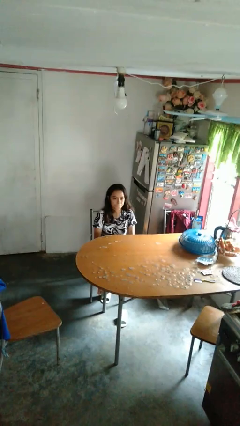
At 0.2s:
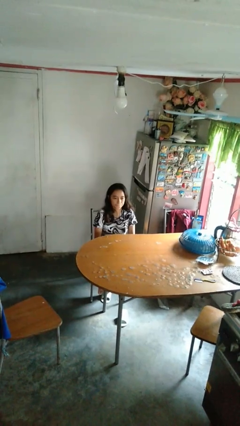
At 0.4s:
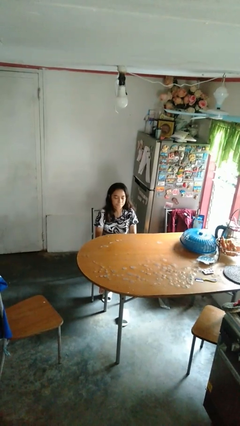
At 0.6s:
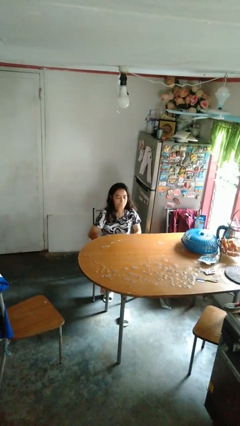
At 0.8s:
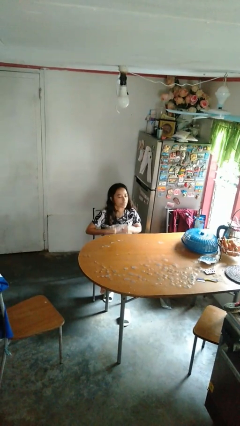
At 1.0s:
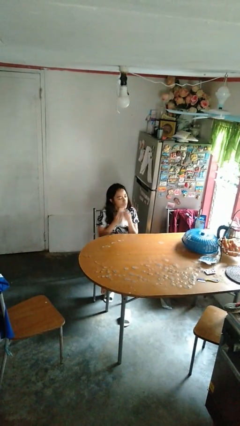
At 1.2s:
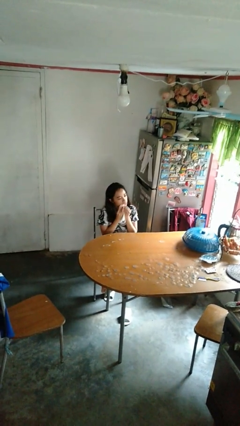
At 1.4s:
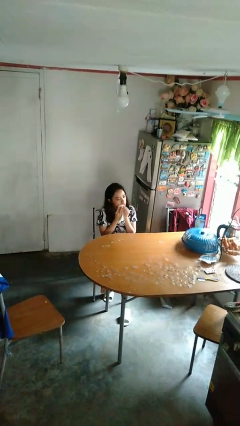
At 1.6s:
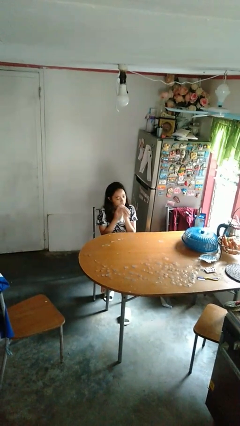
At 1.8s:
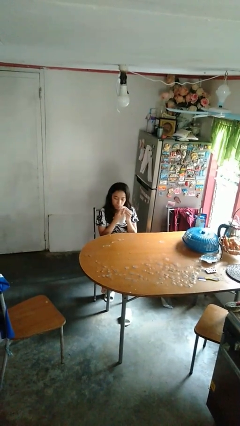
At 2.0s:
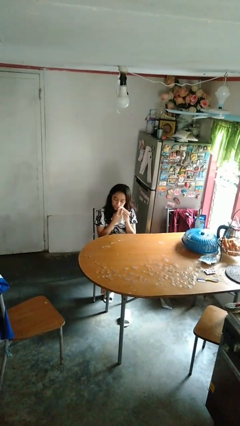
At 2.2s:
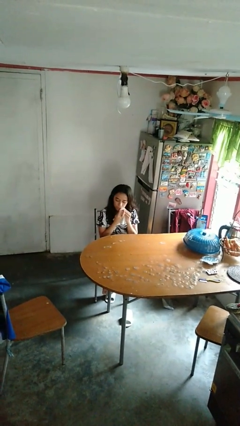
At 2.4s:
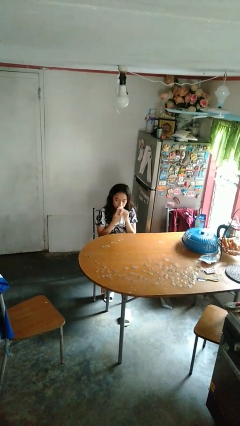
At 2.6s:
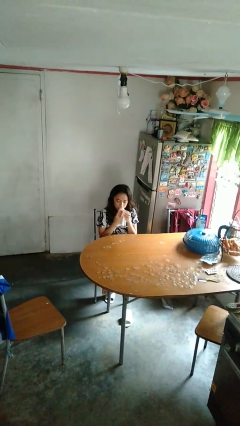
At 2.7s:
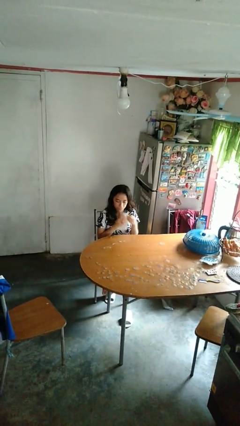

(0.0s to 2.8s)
person wipes mouth with napkin

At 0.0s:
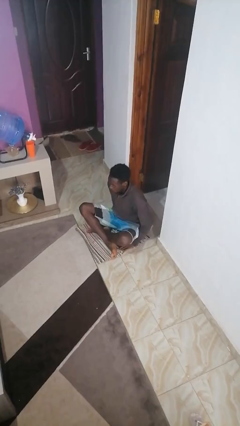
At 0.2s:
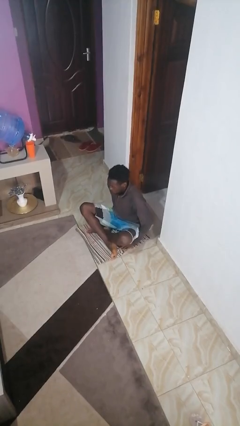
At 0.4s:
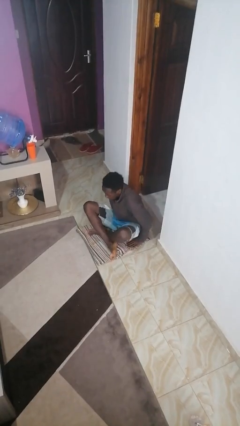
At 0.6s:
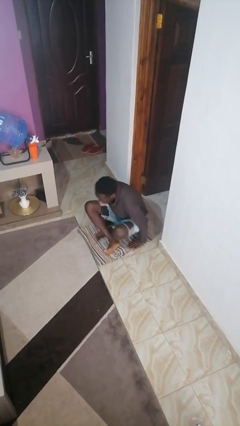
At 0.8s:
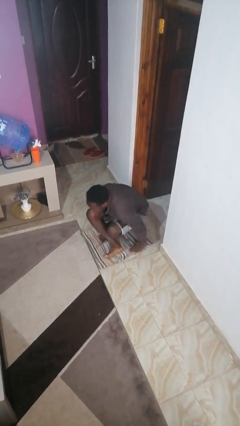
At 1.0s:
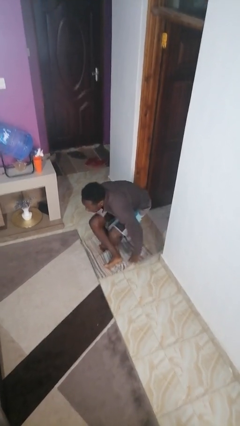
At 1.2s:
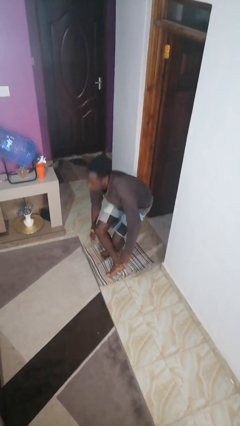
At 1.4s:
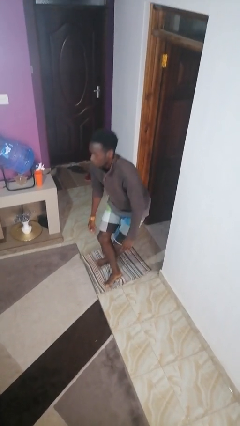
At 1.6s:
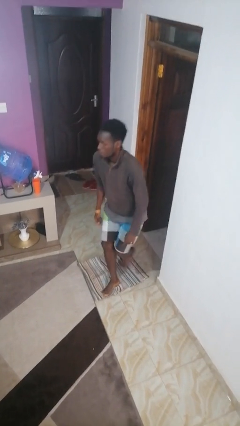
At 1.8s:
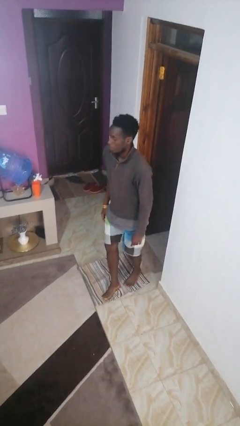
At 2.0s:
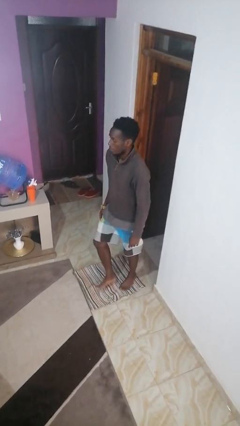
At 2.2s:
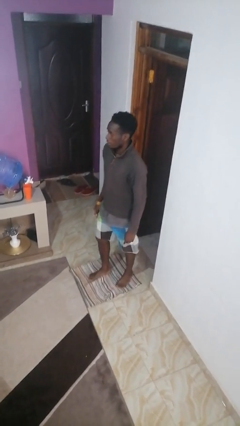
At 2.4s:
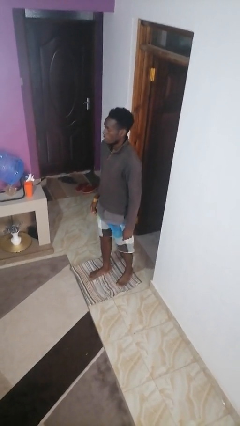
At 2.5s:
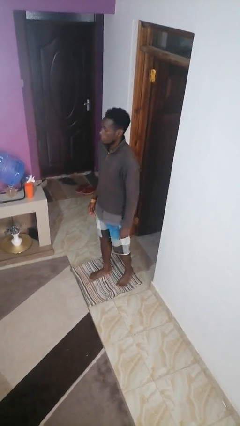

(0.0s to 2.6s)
person stands up from floor

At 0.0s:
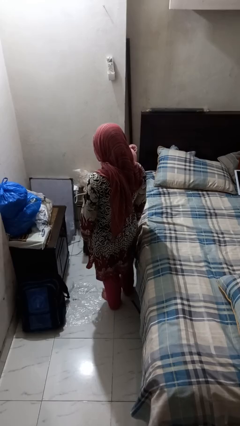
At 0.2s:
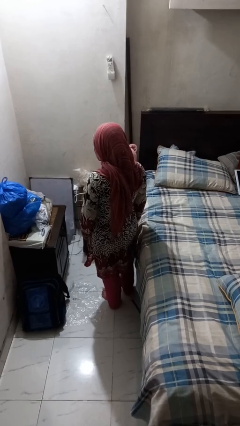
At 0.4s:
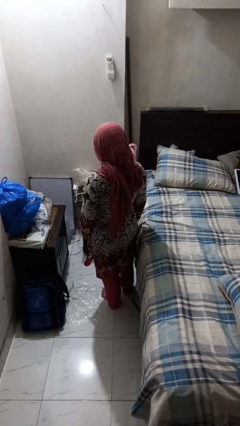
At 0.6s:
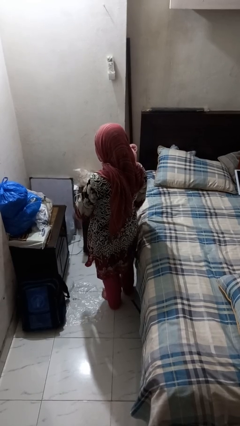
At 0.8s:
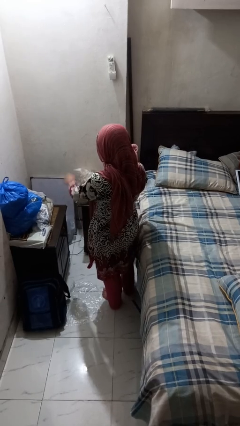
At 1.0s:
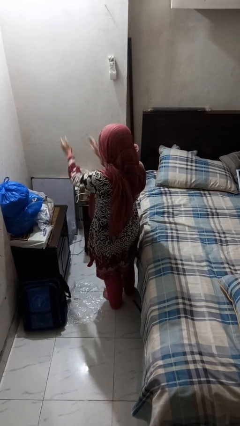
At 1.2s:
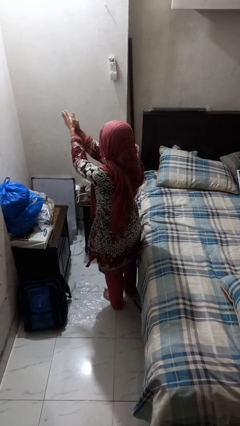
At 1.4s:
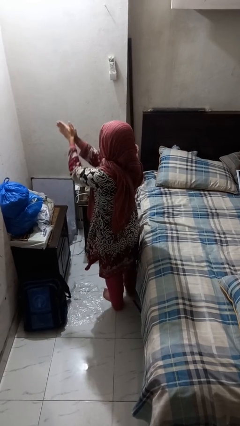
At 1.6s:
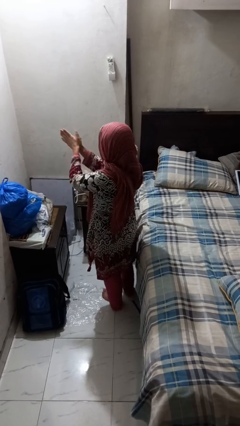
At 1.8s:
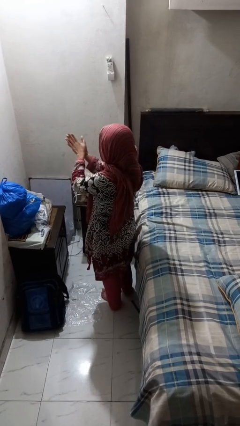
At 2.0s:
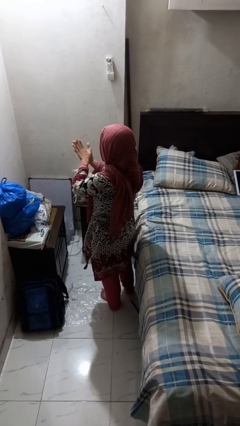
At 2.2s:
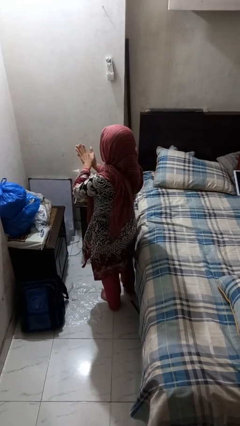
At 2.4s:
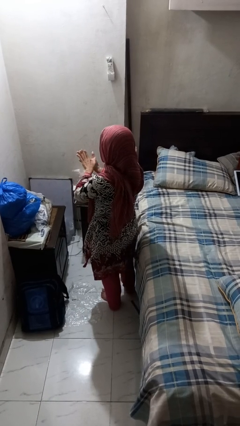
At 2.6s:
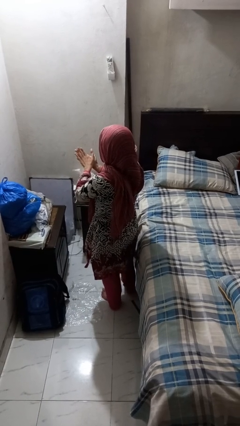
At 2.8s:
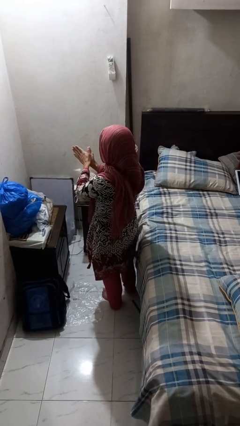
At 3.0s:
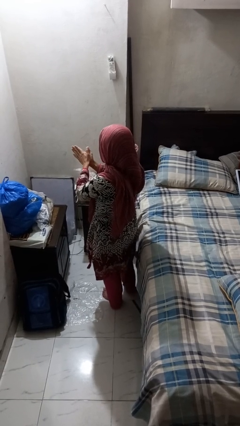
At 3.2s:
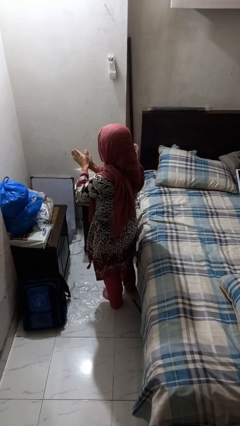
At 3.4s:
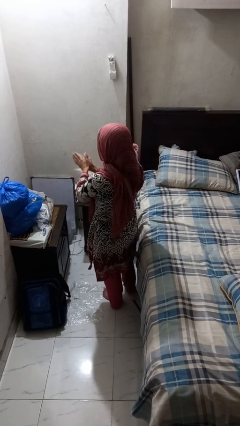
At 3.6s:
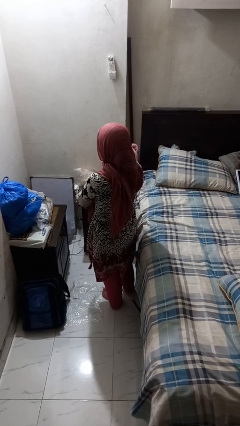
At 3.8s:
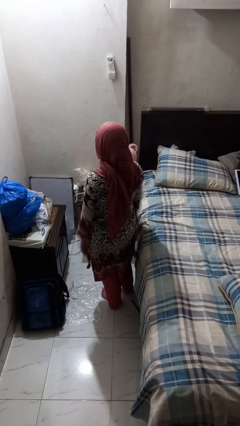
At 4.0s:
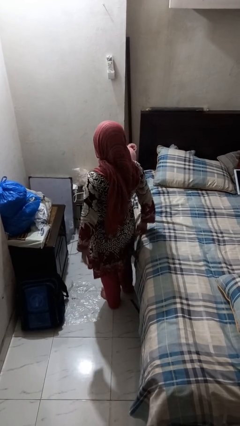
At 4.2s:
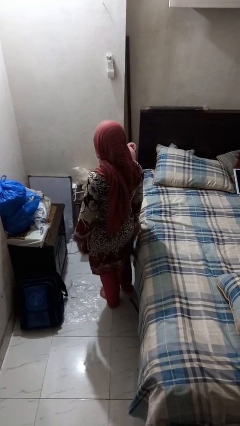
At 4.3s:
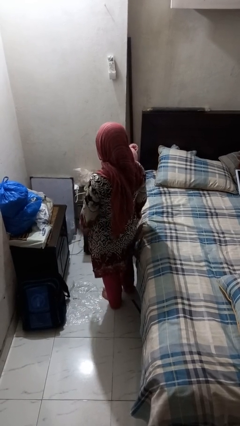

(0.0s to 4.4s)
person swats bug

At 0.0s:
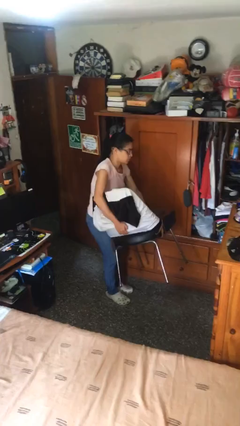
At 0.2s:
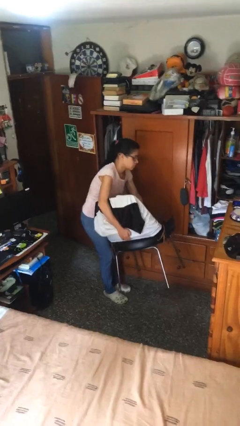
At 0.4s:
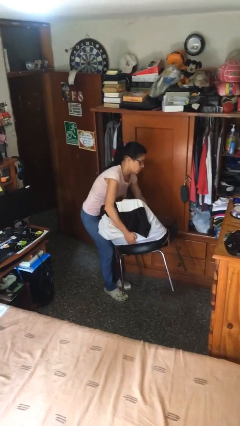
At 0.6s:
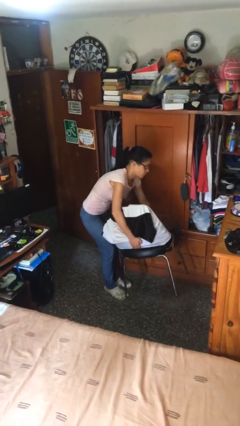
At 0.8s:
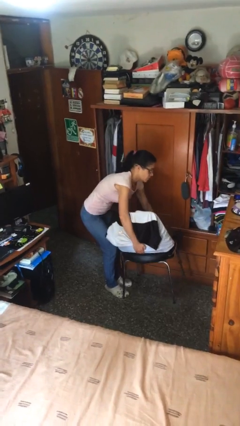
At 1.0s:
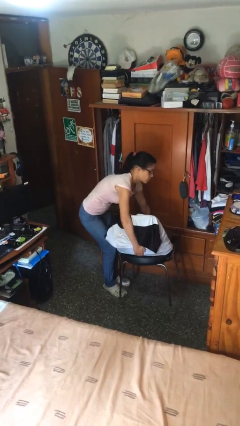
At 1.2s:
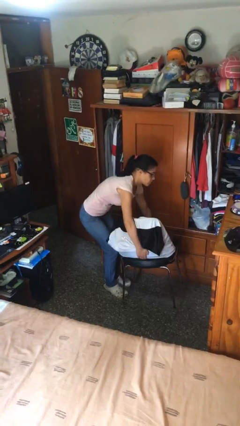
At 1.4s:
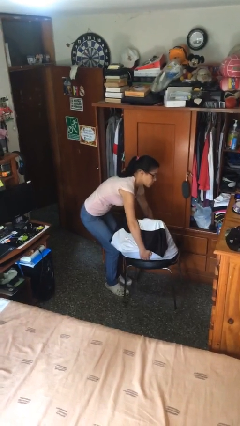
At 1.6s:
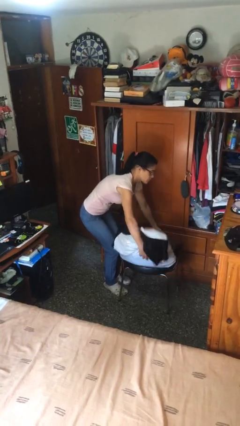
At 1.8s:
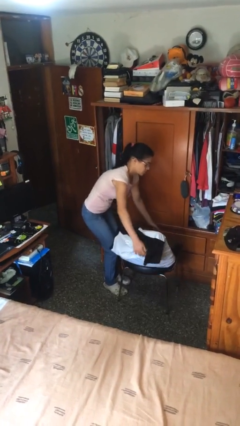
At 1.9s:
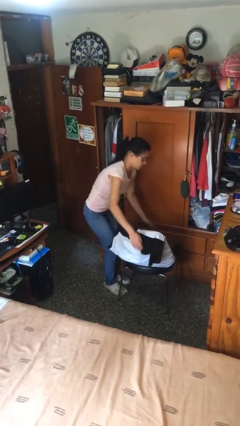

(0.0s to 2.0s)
person puts down object on floor

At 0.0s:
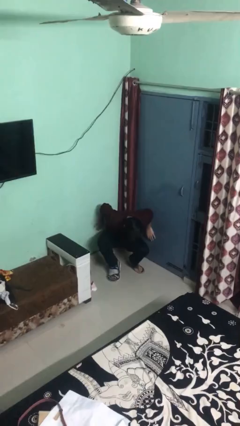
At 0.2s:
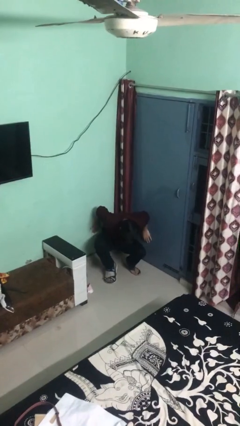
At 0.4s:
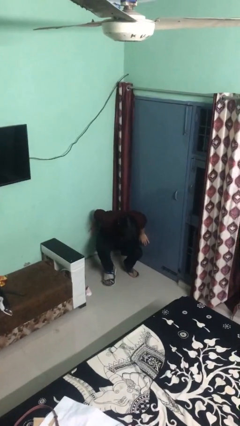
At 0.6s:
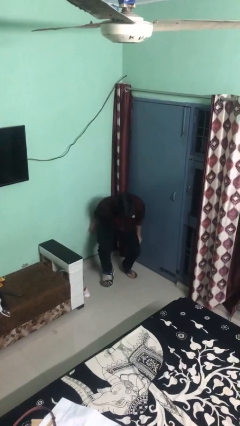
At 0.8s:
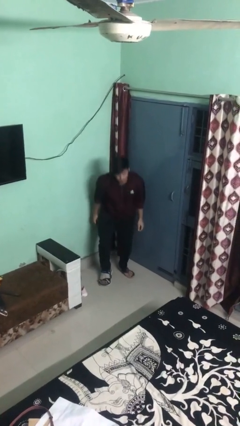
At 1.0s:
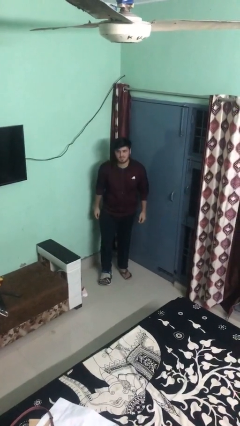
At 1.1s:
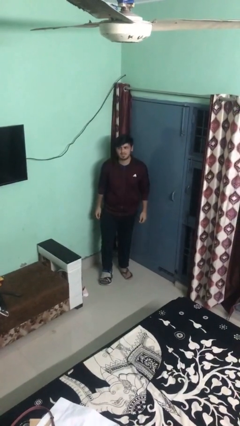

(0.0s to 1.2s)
person stands up

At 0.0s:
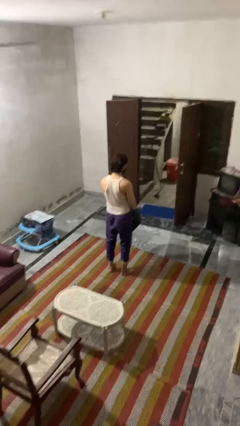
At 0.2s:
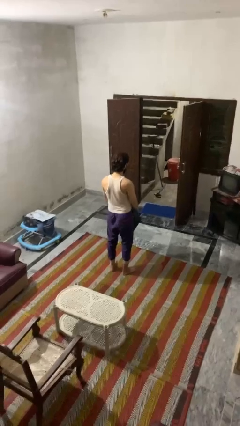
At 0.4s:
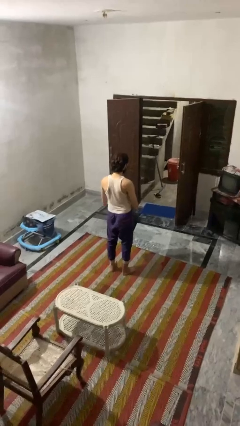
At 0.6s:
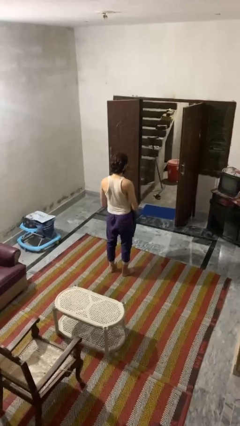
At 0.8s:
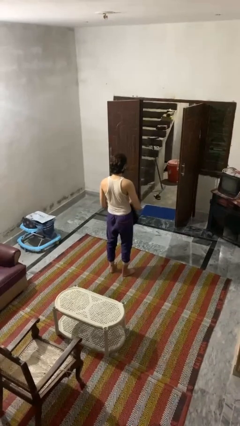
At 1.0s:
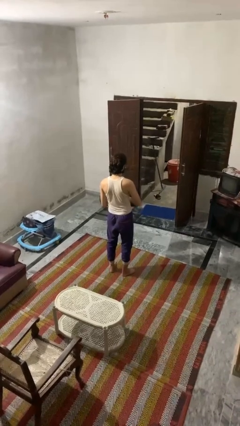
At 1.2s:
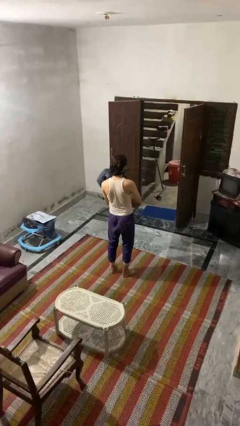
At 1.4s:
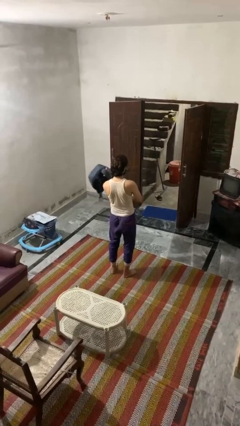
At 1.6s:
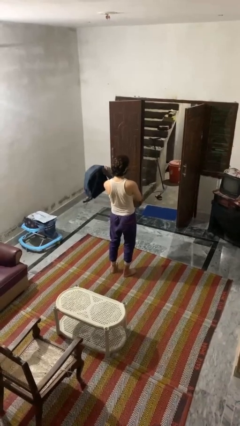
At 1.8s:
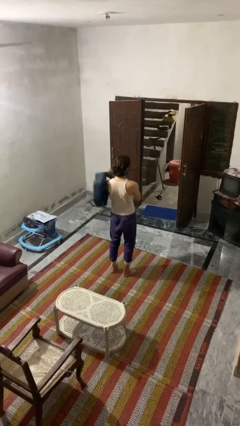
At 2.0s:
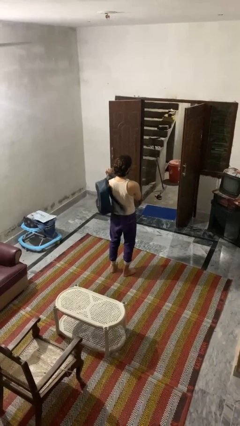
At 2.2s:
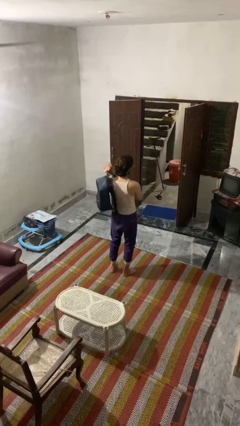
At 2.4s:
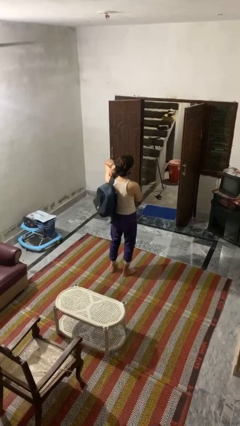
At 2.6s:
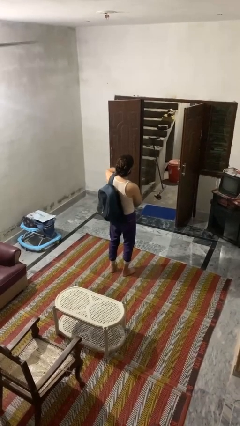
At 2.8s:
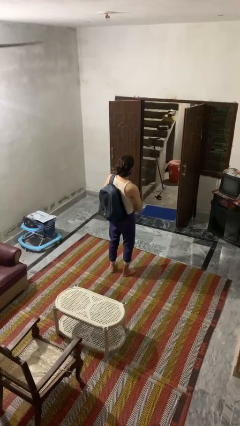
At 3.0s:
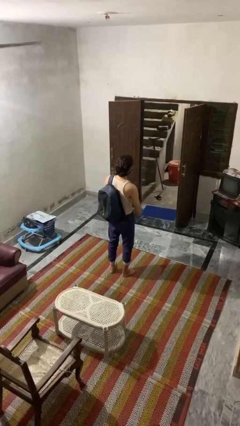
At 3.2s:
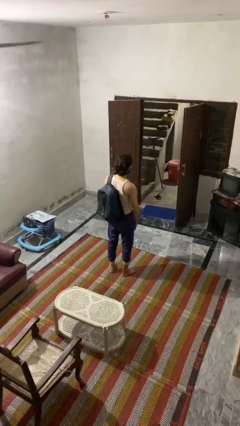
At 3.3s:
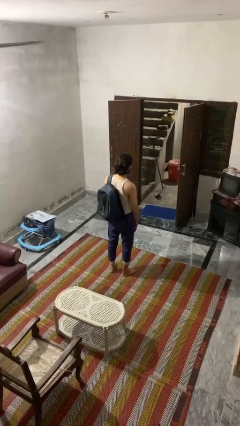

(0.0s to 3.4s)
person puts on backpack

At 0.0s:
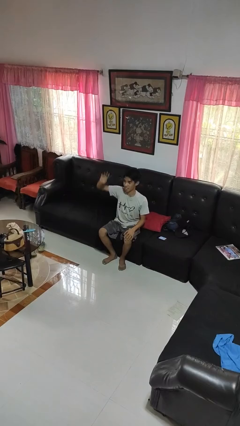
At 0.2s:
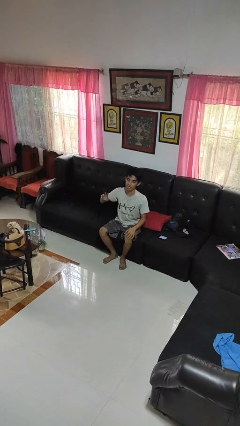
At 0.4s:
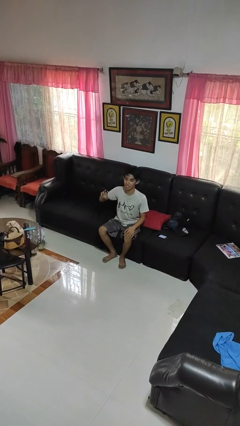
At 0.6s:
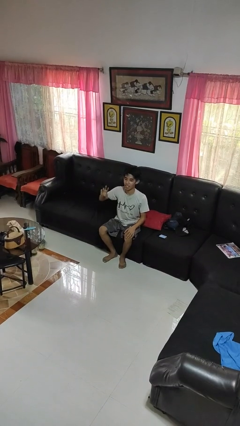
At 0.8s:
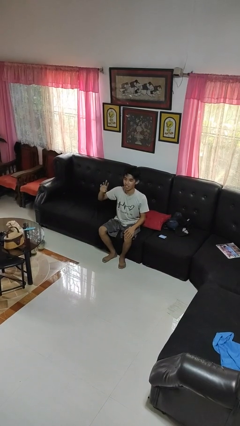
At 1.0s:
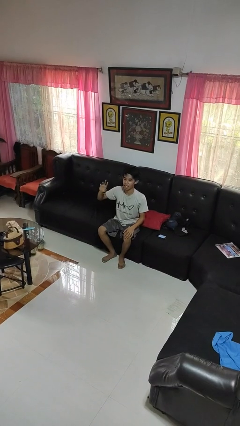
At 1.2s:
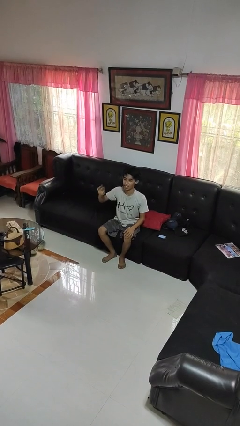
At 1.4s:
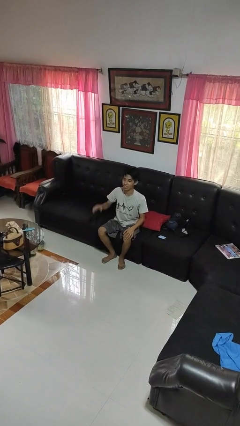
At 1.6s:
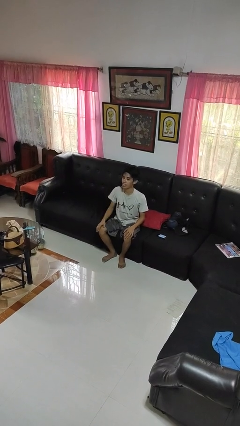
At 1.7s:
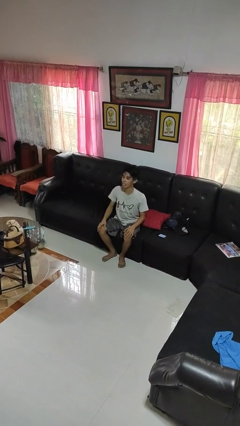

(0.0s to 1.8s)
person gestures lower hand
